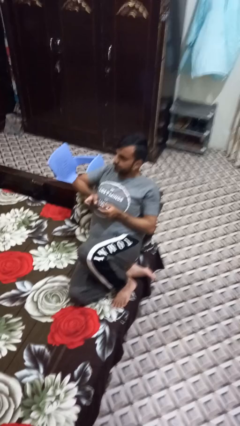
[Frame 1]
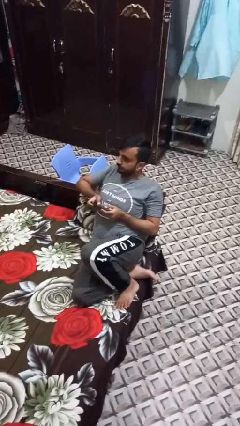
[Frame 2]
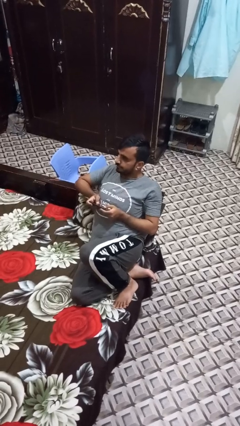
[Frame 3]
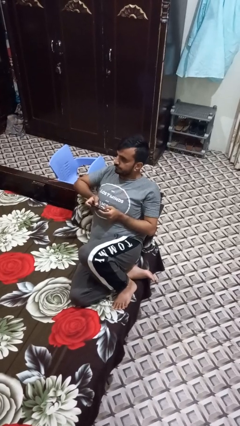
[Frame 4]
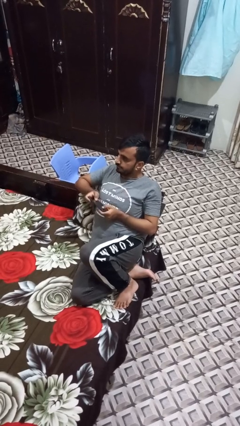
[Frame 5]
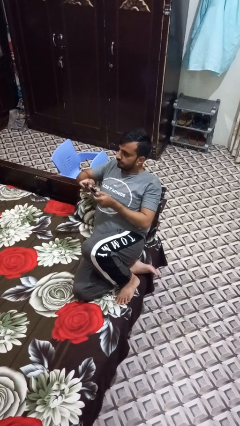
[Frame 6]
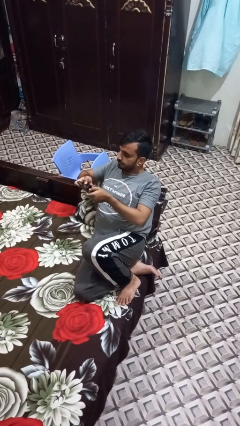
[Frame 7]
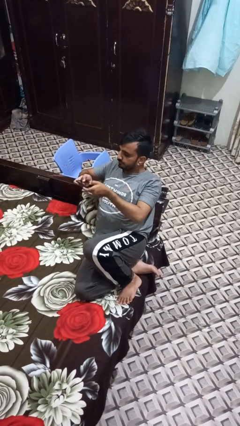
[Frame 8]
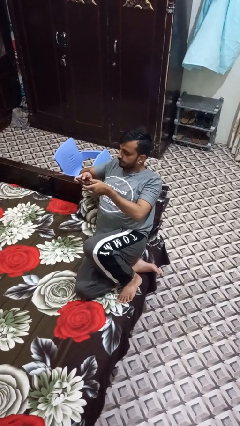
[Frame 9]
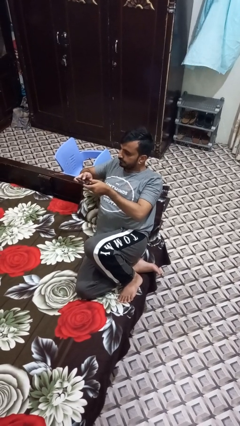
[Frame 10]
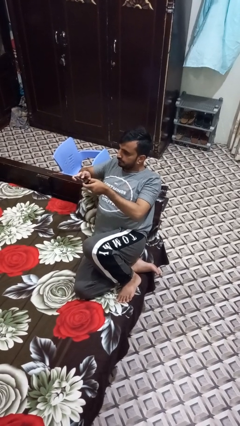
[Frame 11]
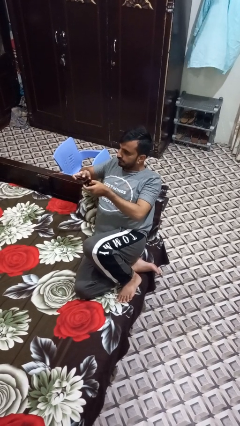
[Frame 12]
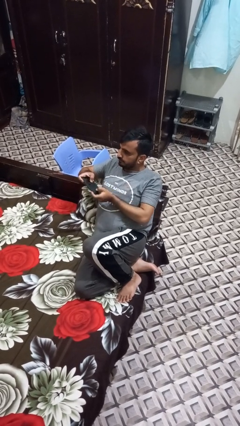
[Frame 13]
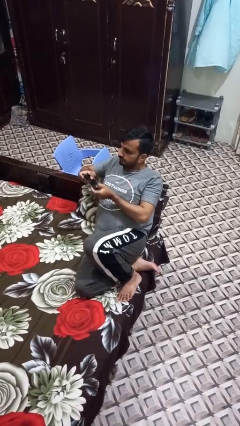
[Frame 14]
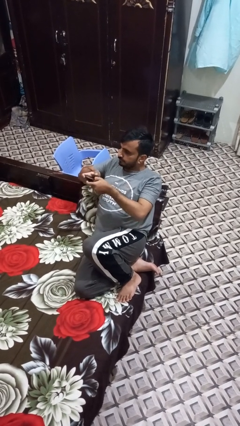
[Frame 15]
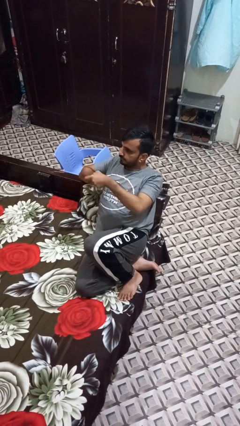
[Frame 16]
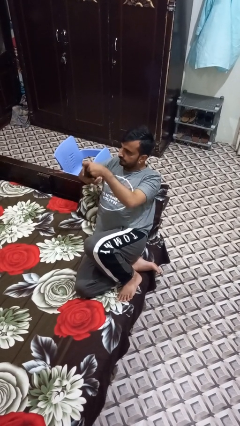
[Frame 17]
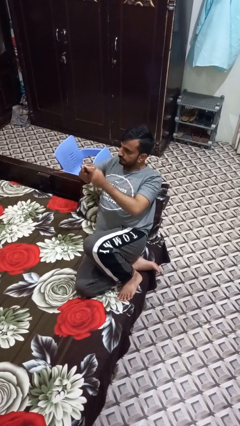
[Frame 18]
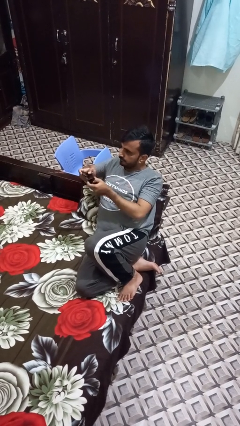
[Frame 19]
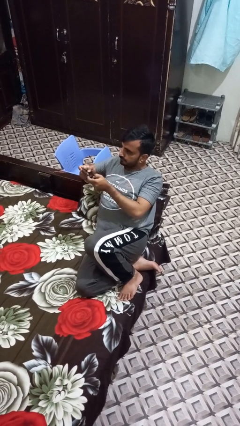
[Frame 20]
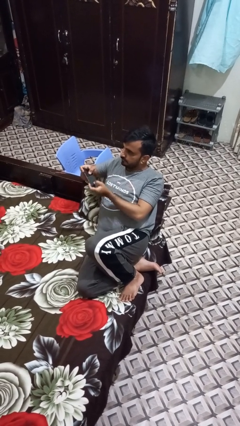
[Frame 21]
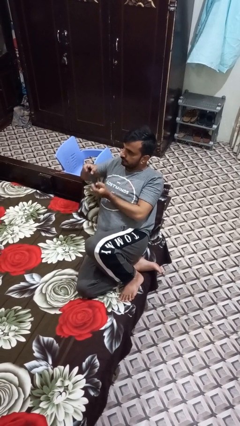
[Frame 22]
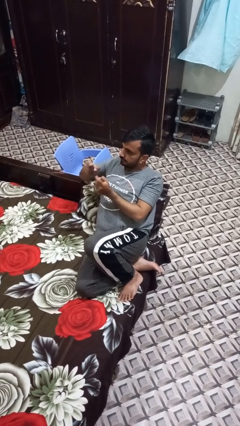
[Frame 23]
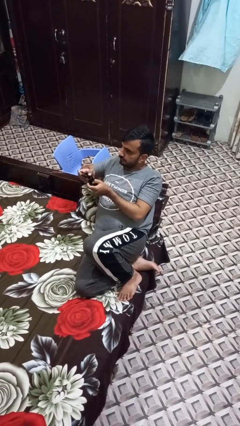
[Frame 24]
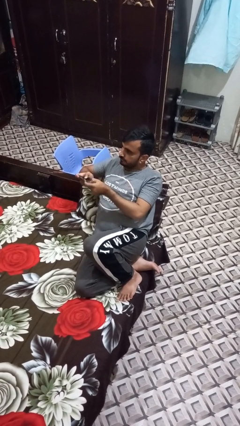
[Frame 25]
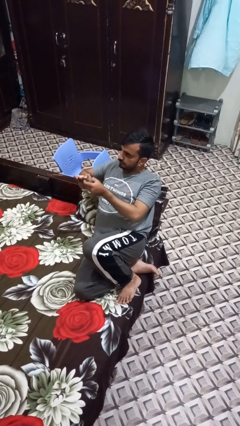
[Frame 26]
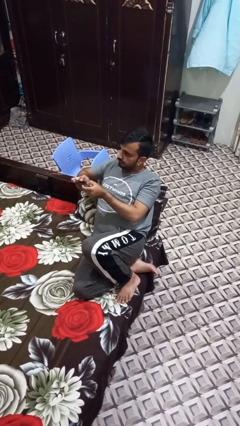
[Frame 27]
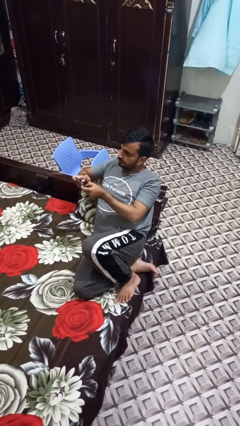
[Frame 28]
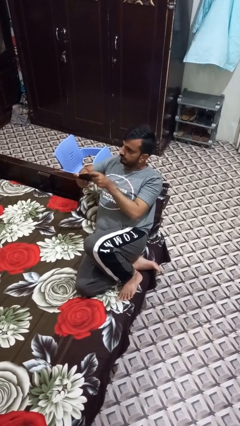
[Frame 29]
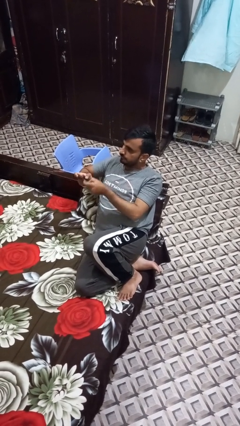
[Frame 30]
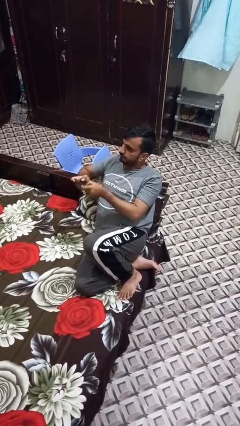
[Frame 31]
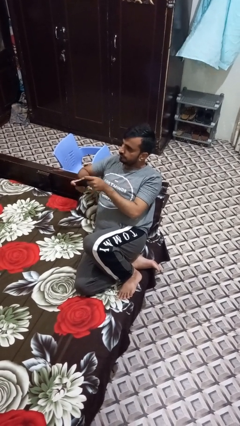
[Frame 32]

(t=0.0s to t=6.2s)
person interacts with handheld game

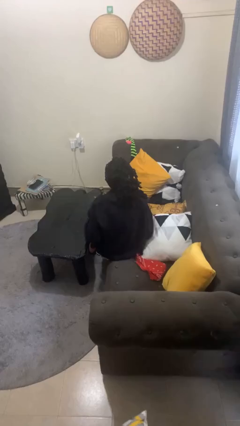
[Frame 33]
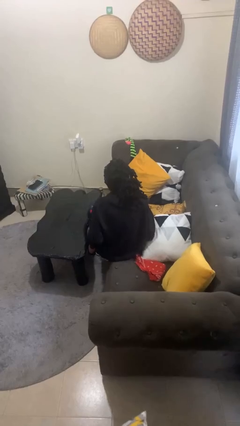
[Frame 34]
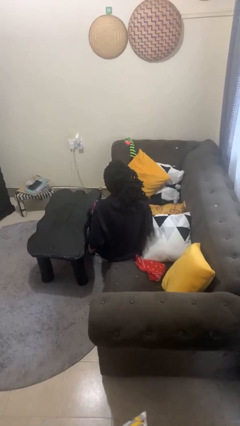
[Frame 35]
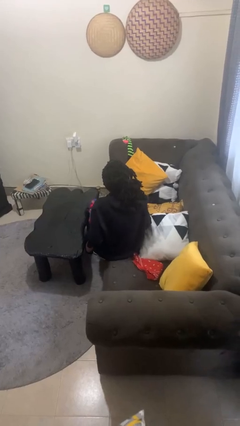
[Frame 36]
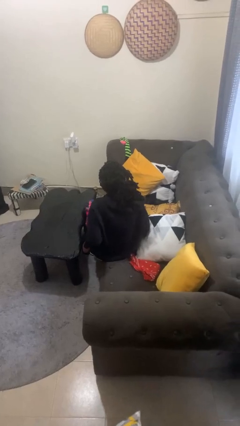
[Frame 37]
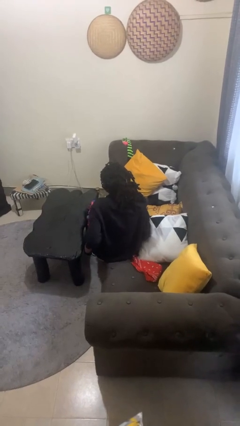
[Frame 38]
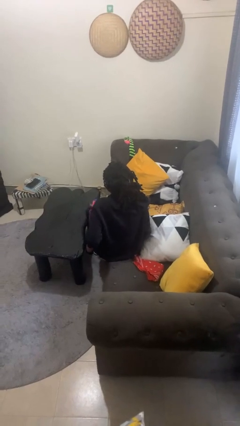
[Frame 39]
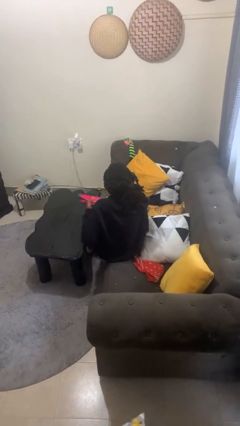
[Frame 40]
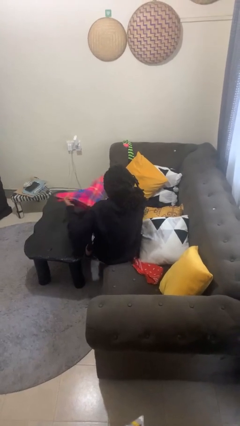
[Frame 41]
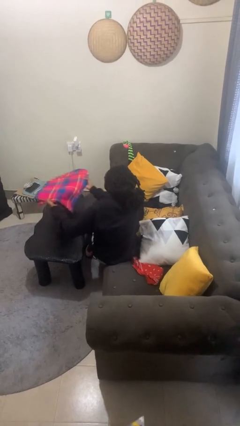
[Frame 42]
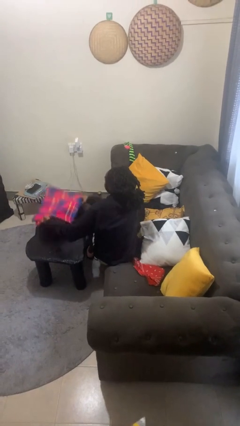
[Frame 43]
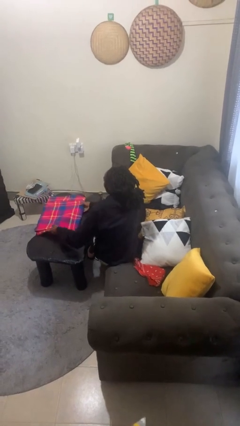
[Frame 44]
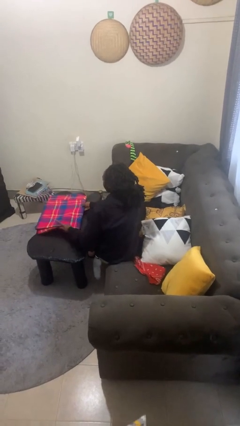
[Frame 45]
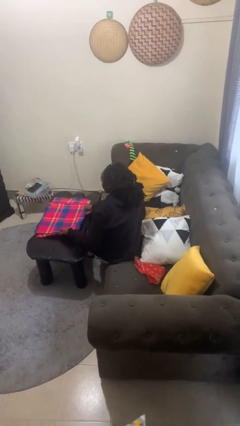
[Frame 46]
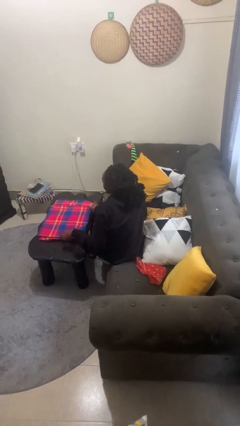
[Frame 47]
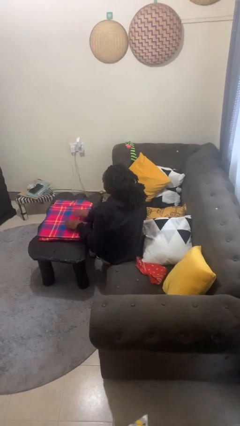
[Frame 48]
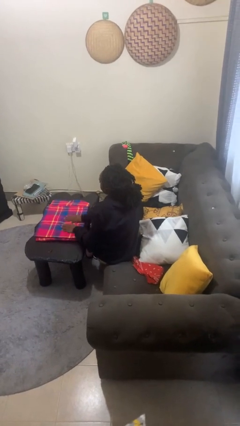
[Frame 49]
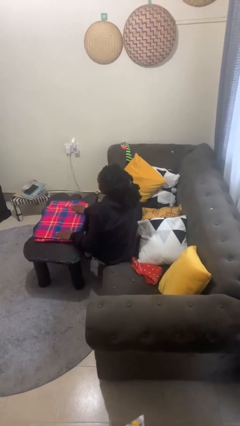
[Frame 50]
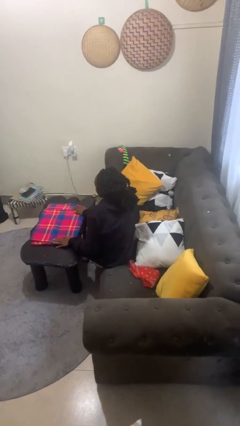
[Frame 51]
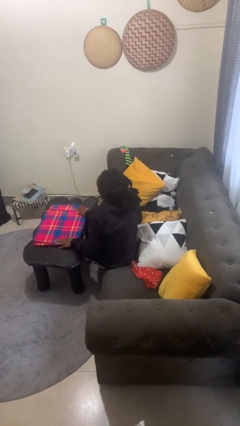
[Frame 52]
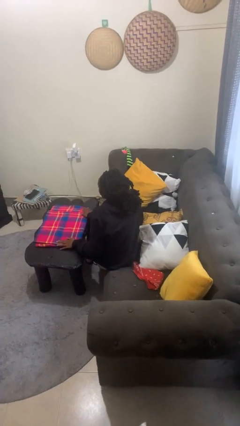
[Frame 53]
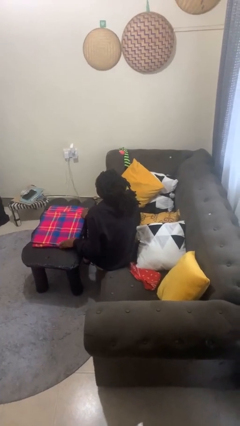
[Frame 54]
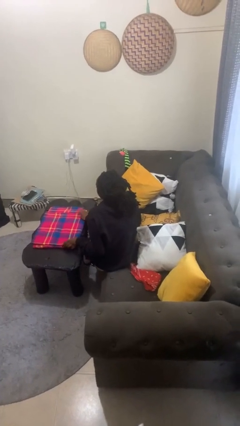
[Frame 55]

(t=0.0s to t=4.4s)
person spreads tablecloth

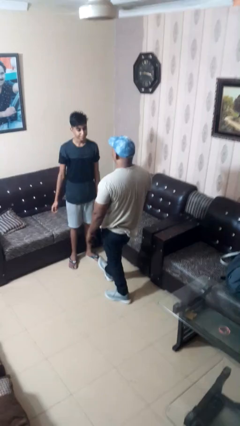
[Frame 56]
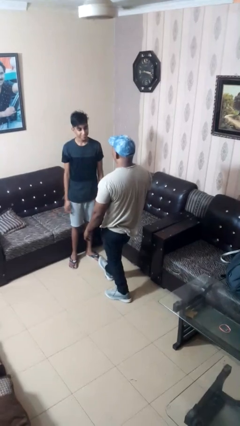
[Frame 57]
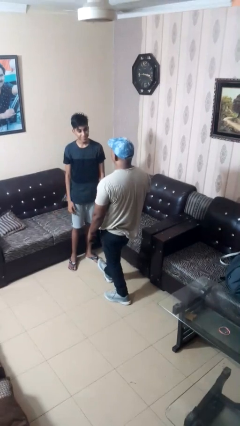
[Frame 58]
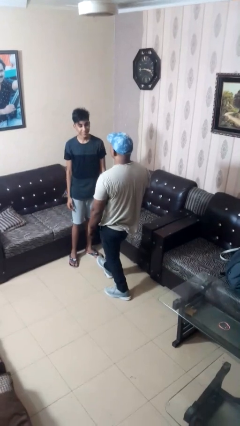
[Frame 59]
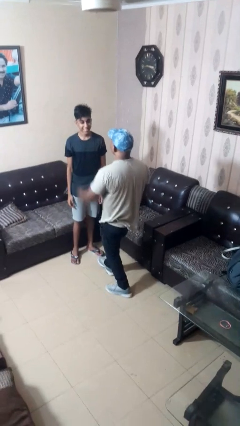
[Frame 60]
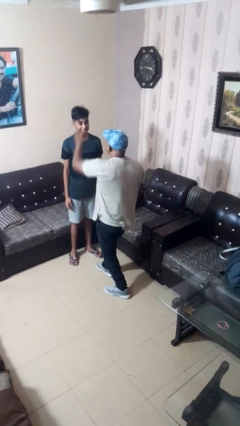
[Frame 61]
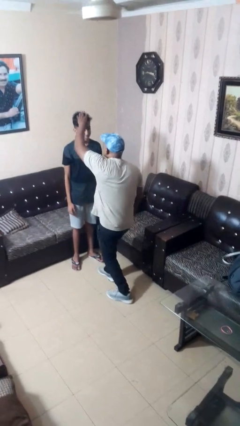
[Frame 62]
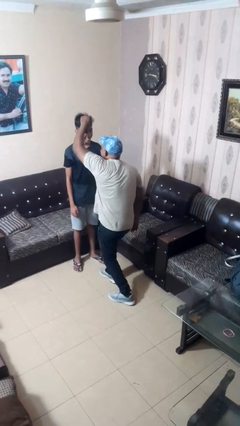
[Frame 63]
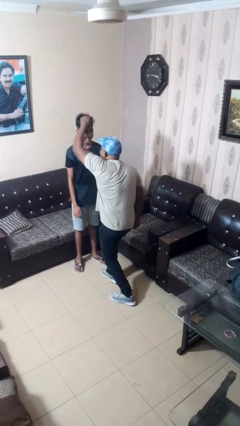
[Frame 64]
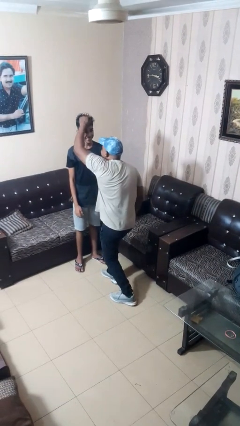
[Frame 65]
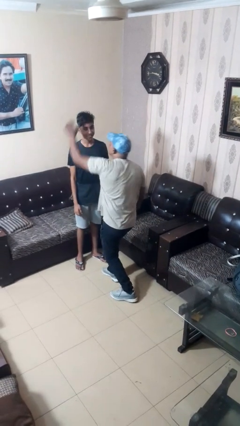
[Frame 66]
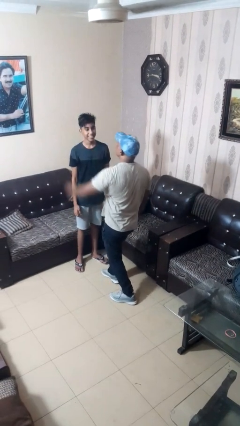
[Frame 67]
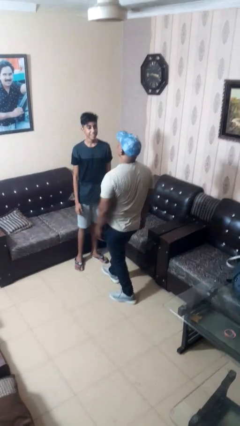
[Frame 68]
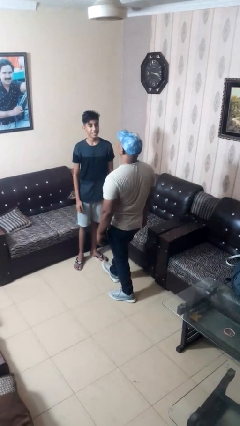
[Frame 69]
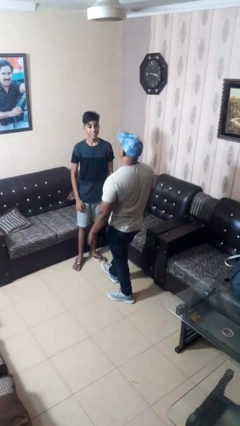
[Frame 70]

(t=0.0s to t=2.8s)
person grabs person by hair

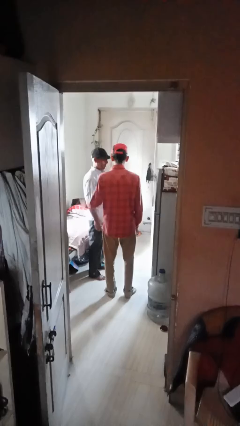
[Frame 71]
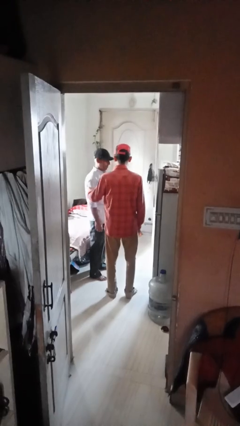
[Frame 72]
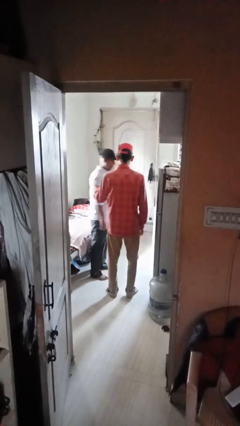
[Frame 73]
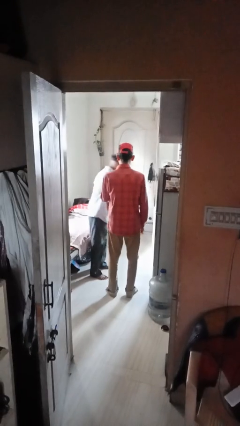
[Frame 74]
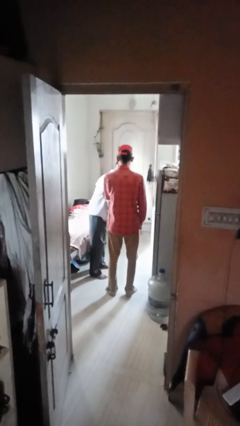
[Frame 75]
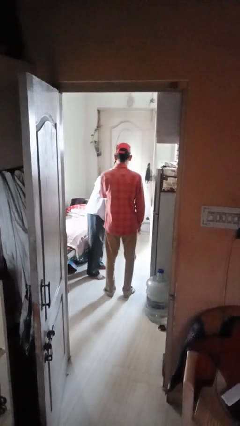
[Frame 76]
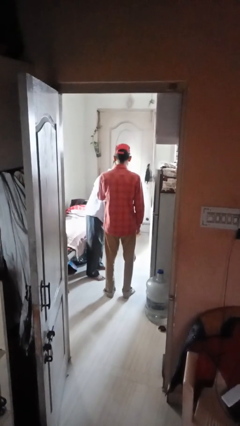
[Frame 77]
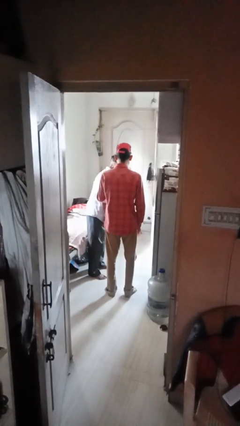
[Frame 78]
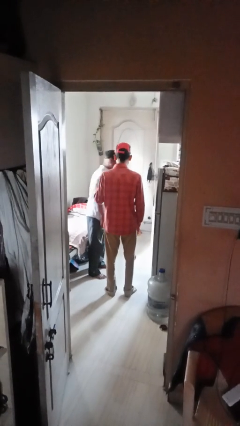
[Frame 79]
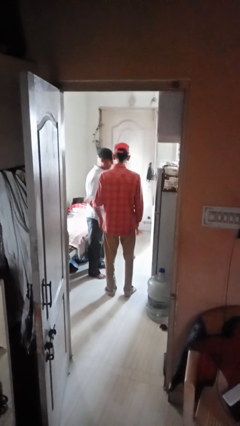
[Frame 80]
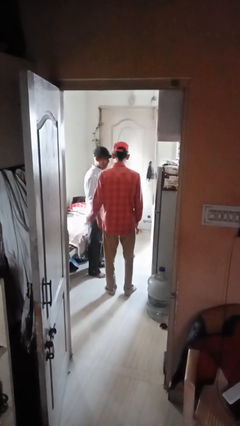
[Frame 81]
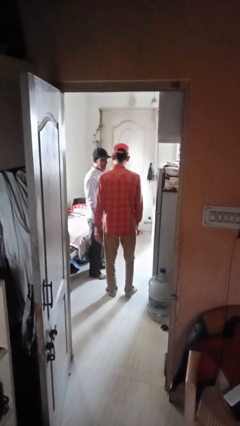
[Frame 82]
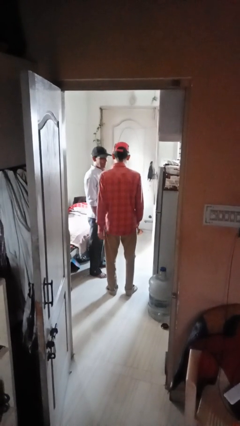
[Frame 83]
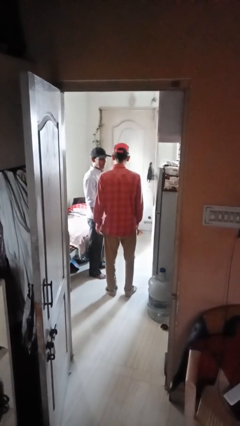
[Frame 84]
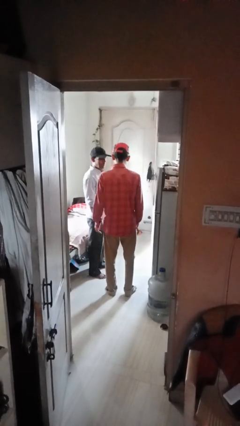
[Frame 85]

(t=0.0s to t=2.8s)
person shoves person

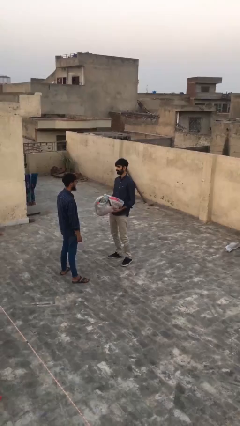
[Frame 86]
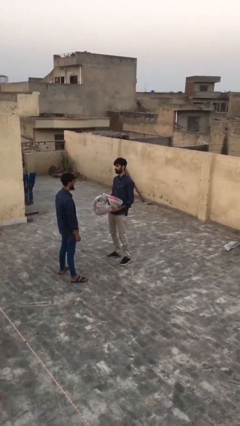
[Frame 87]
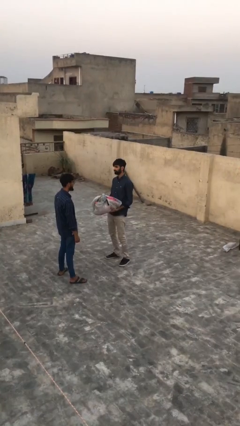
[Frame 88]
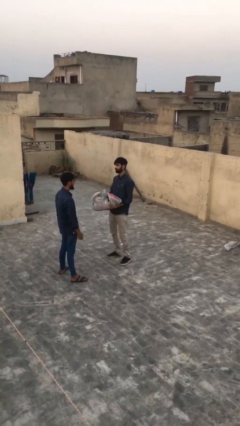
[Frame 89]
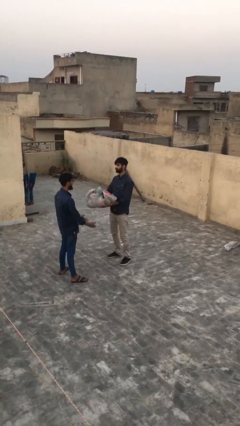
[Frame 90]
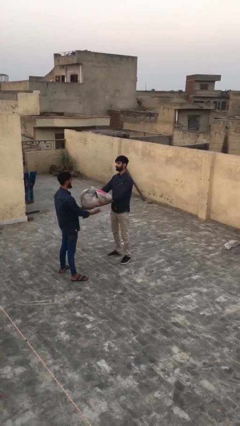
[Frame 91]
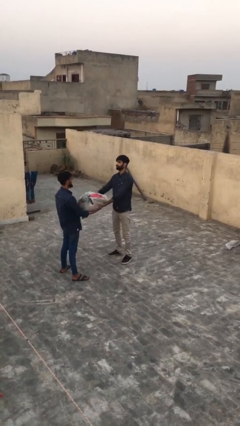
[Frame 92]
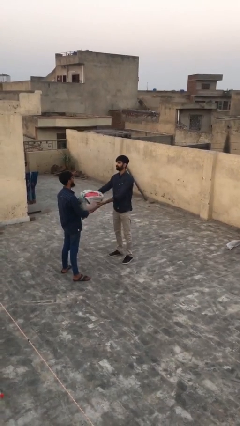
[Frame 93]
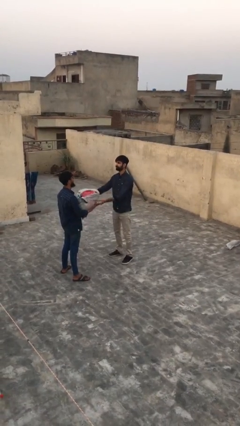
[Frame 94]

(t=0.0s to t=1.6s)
person transfers object to person

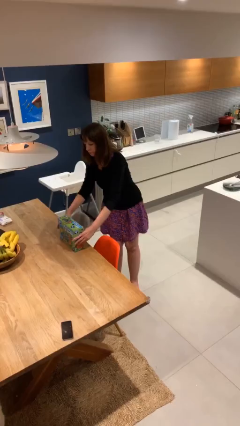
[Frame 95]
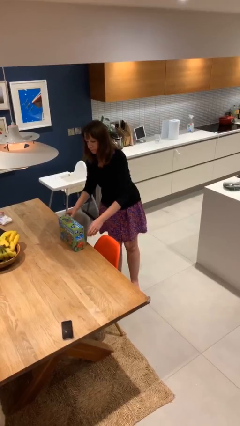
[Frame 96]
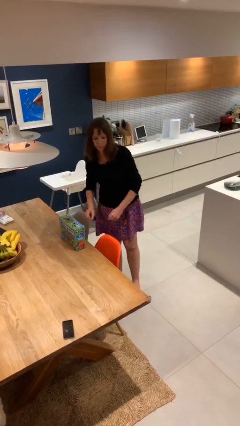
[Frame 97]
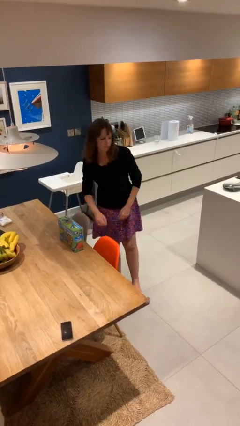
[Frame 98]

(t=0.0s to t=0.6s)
person puts down object on table
